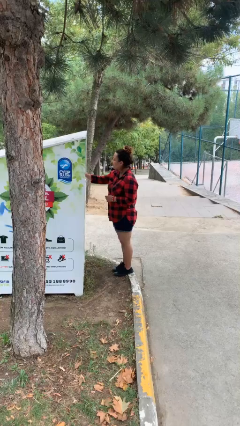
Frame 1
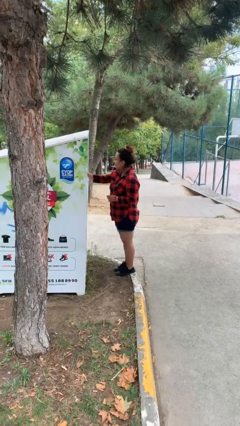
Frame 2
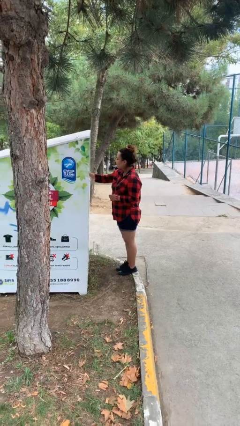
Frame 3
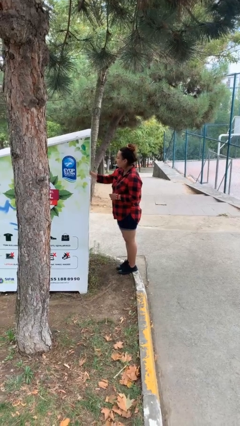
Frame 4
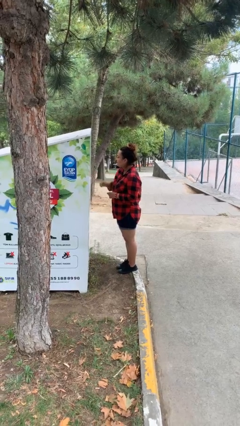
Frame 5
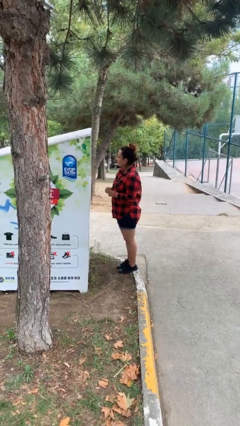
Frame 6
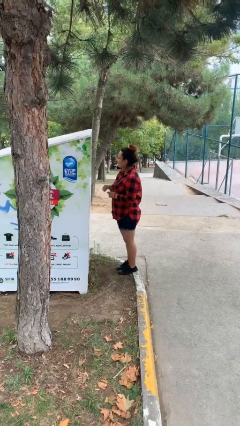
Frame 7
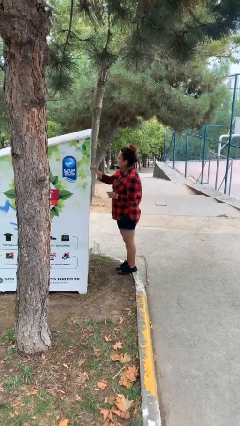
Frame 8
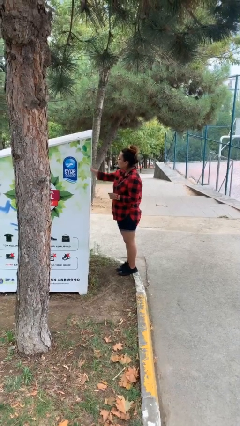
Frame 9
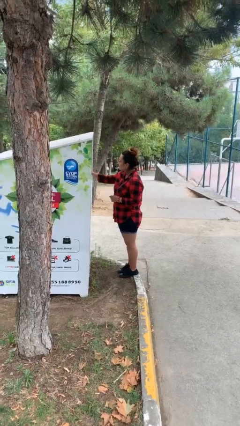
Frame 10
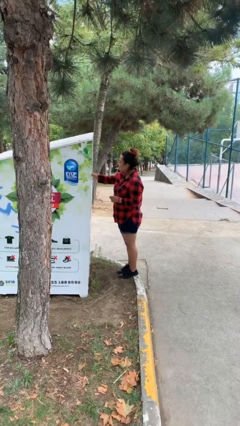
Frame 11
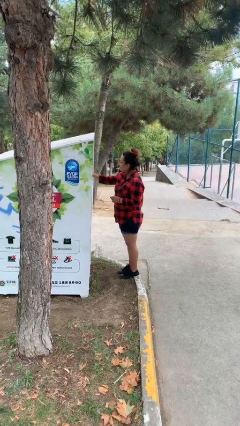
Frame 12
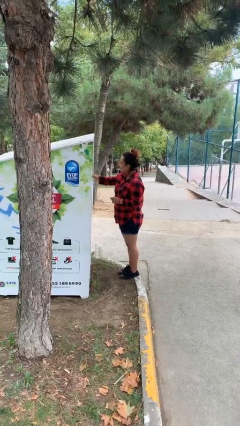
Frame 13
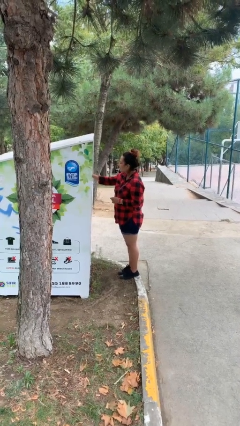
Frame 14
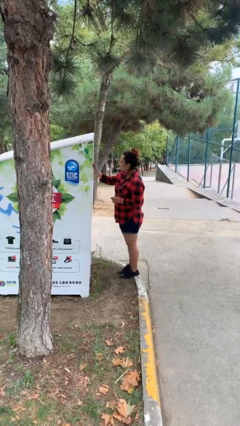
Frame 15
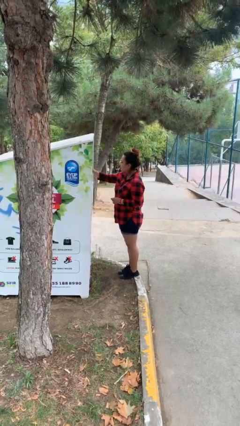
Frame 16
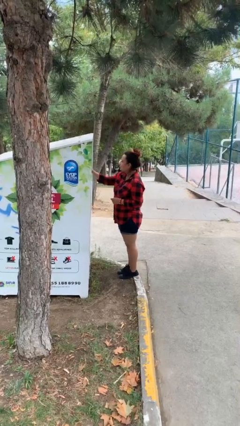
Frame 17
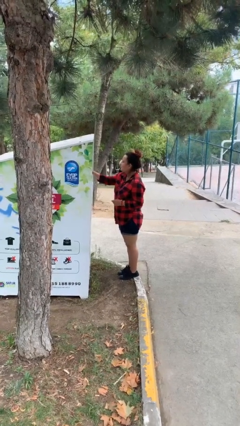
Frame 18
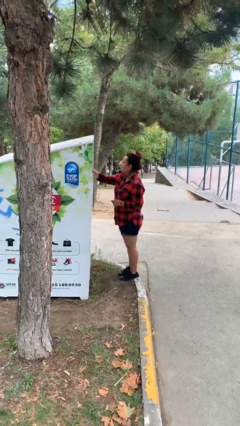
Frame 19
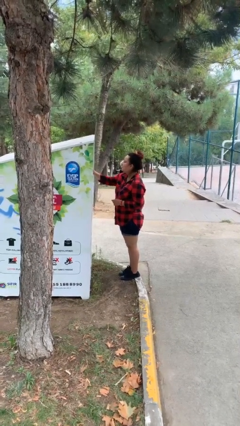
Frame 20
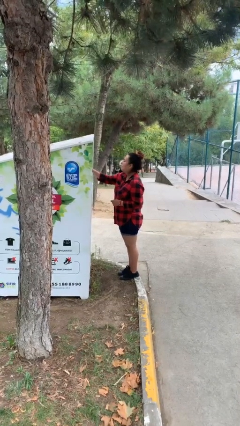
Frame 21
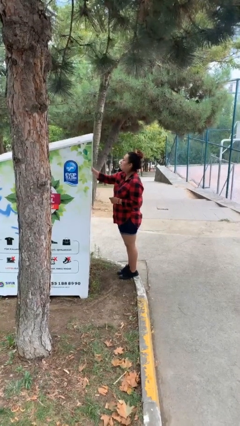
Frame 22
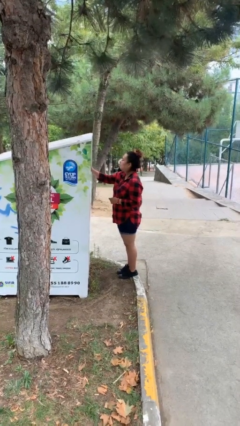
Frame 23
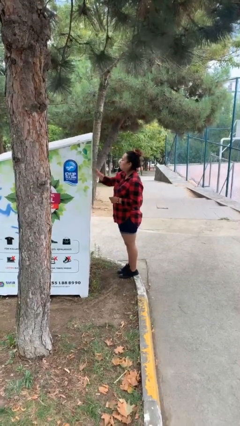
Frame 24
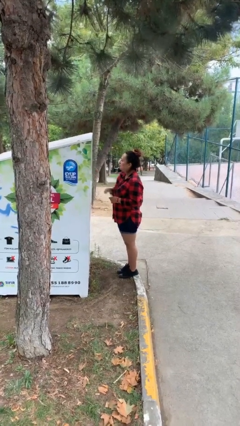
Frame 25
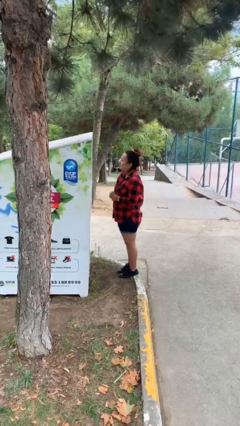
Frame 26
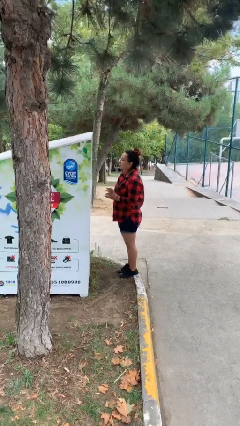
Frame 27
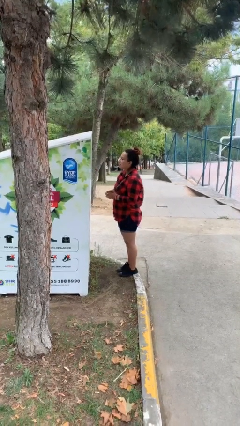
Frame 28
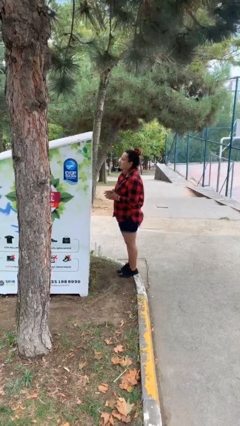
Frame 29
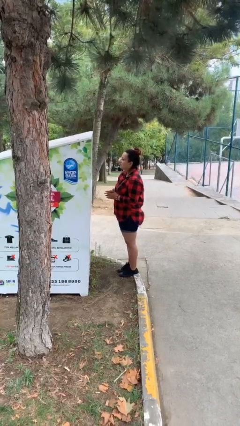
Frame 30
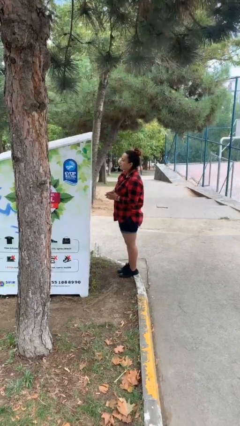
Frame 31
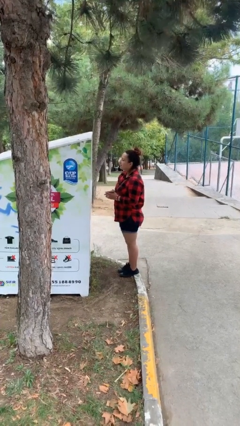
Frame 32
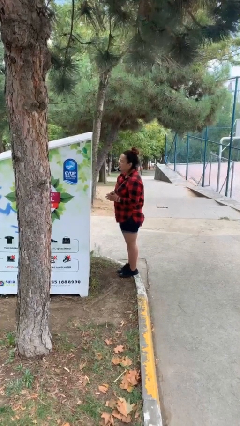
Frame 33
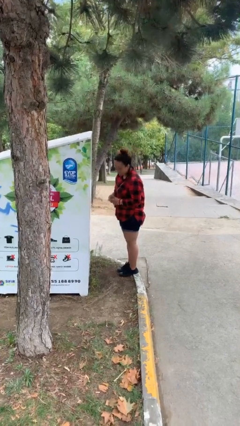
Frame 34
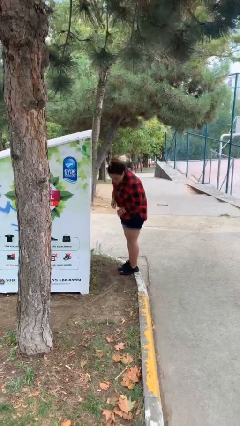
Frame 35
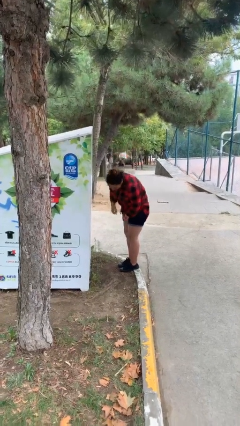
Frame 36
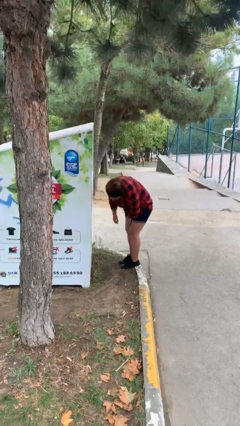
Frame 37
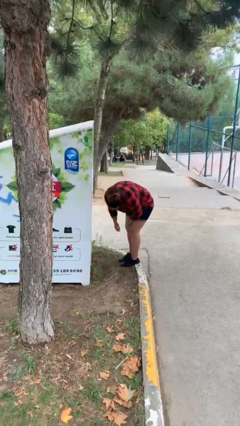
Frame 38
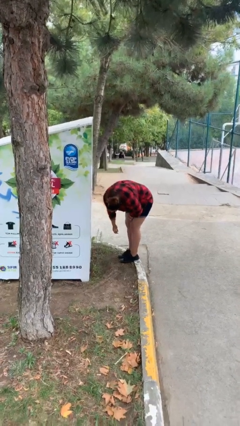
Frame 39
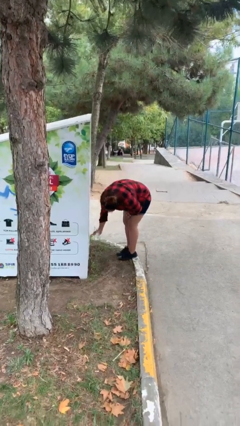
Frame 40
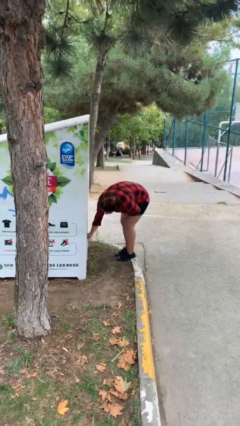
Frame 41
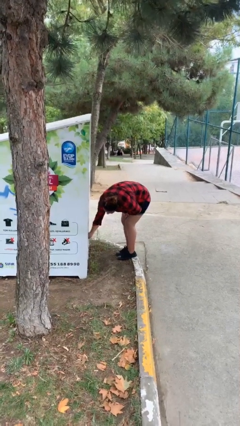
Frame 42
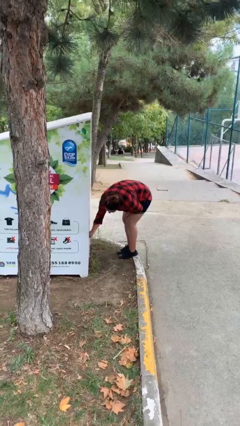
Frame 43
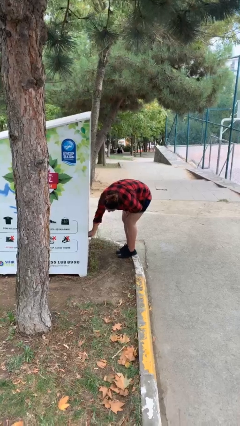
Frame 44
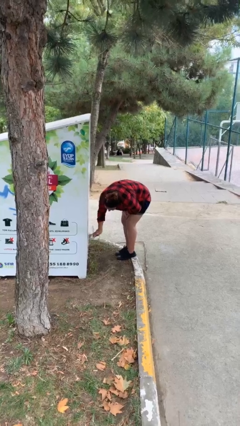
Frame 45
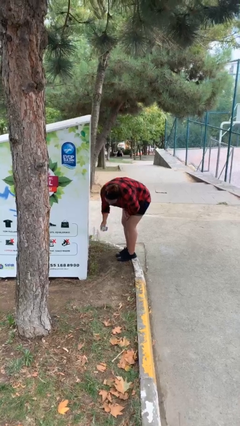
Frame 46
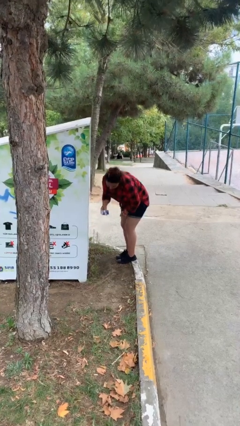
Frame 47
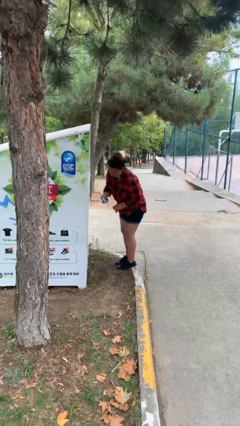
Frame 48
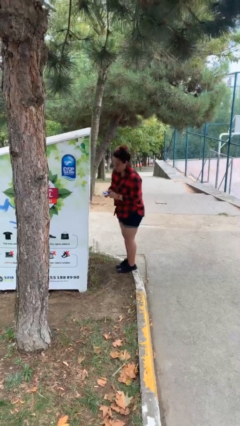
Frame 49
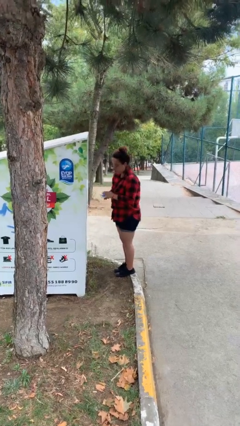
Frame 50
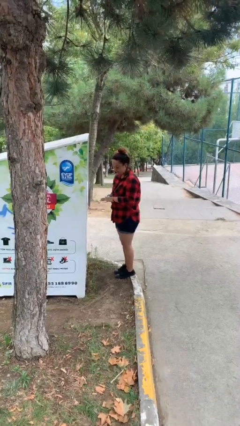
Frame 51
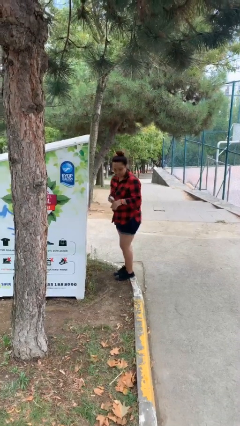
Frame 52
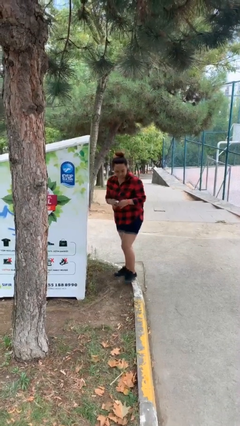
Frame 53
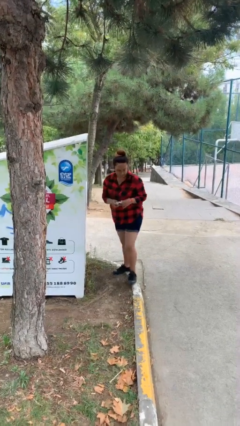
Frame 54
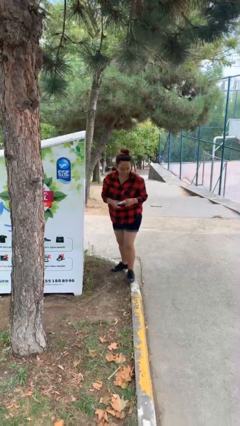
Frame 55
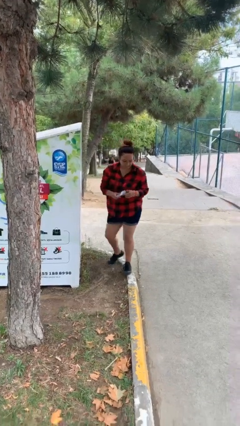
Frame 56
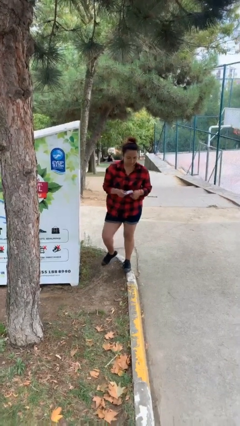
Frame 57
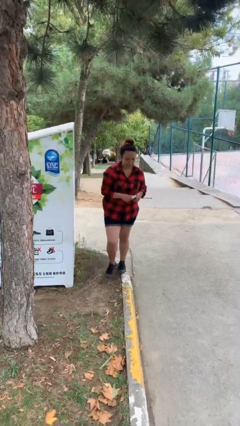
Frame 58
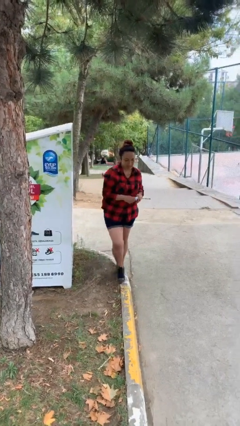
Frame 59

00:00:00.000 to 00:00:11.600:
person purchases from machine

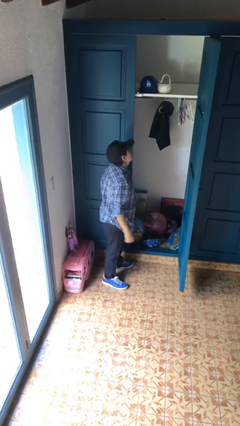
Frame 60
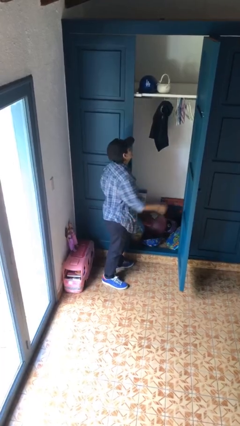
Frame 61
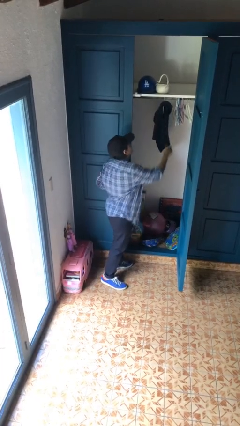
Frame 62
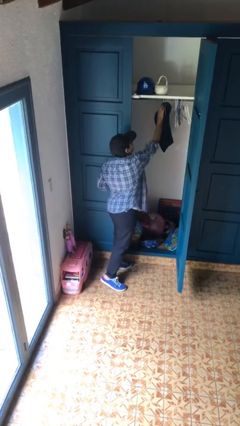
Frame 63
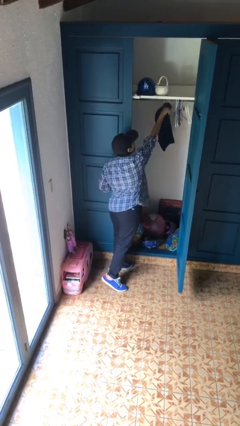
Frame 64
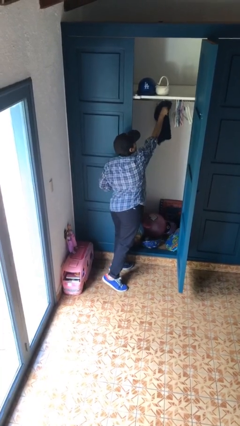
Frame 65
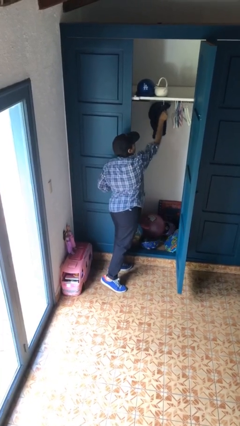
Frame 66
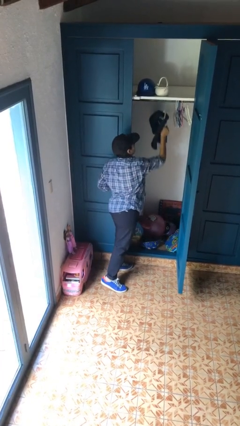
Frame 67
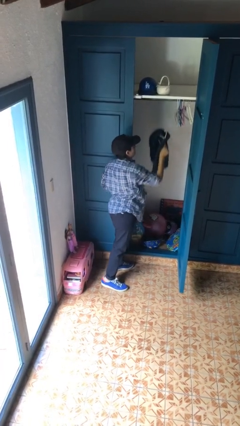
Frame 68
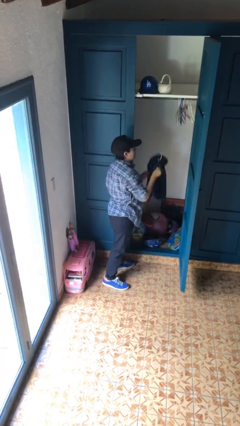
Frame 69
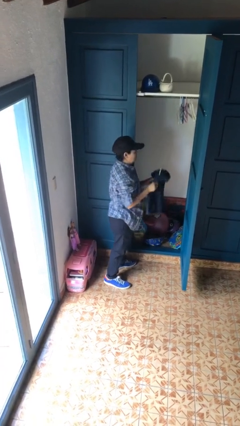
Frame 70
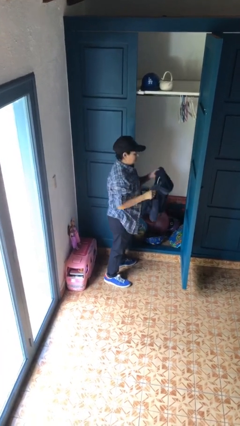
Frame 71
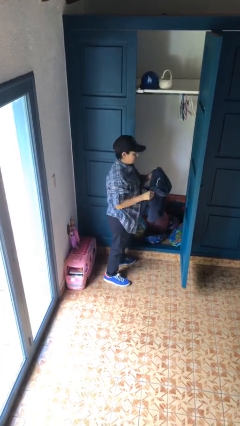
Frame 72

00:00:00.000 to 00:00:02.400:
person takes clothes from closet

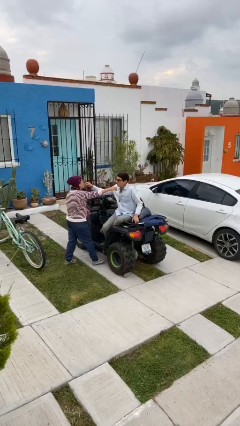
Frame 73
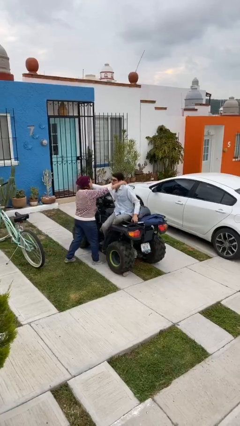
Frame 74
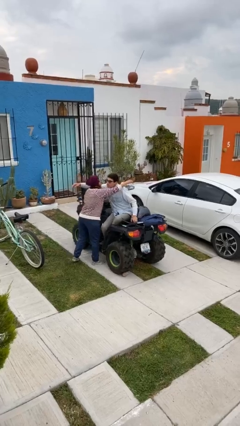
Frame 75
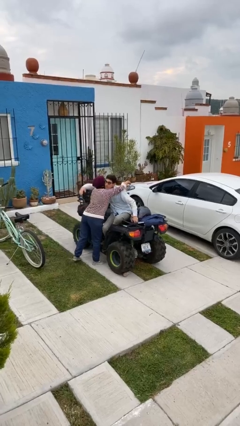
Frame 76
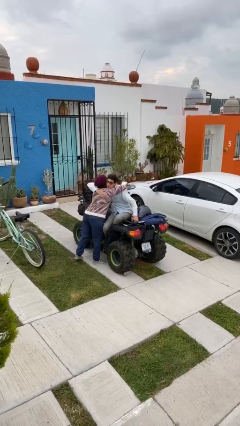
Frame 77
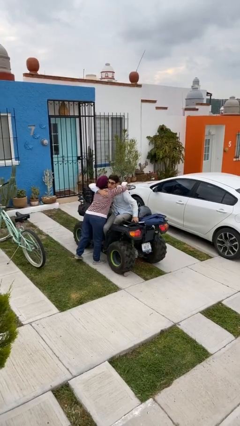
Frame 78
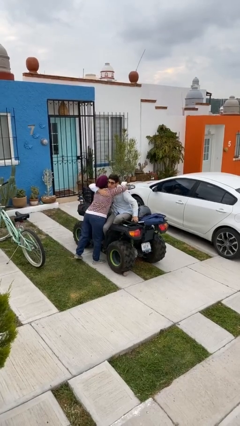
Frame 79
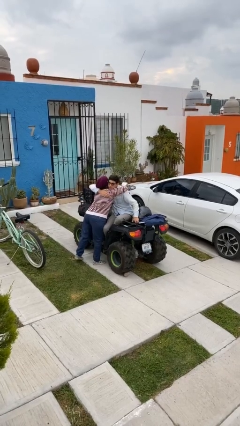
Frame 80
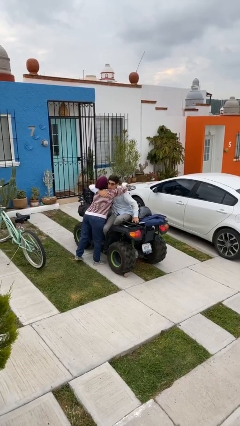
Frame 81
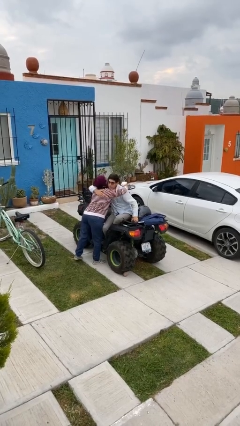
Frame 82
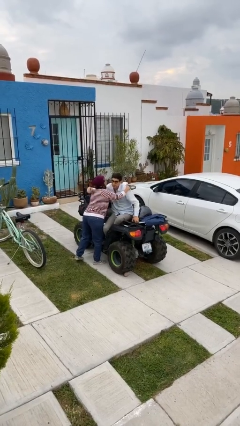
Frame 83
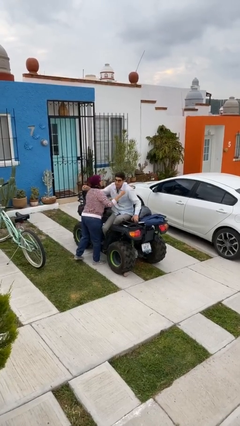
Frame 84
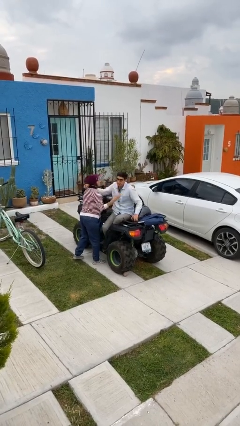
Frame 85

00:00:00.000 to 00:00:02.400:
person embraces person

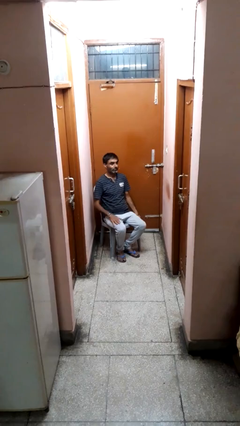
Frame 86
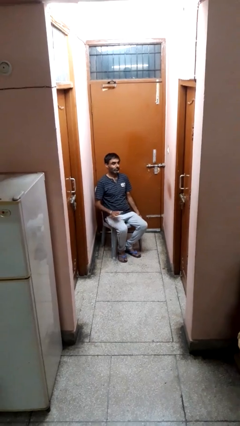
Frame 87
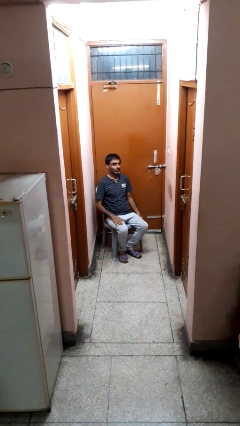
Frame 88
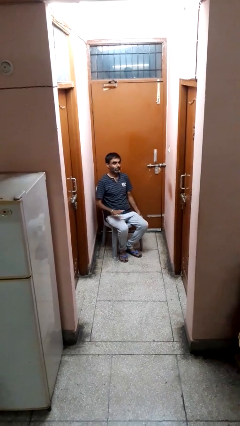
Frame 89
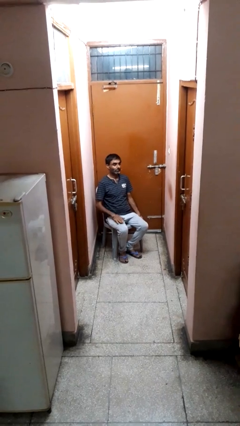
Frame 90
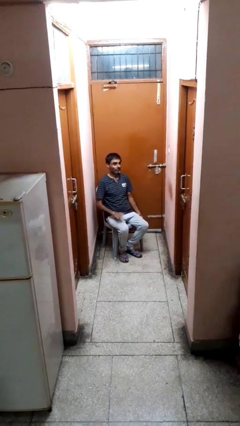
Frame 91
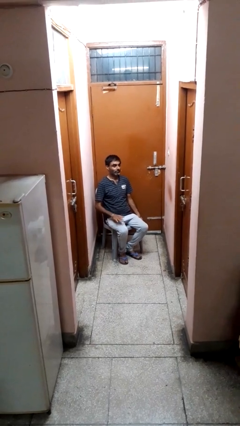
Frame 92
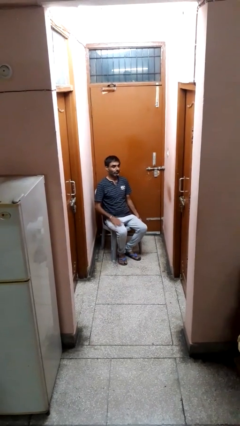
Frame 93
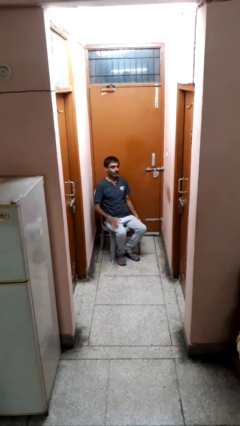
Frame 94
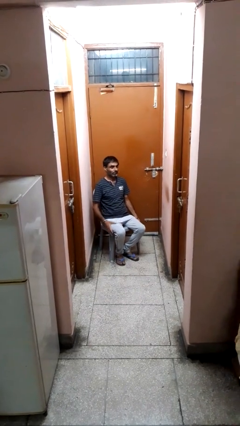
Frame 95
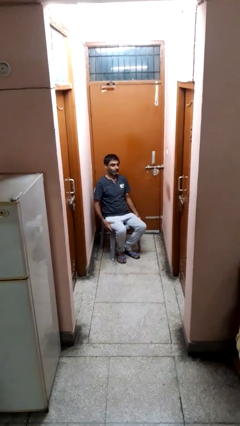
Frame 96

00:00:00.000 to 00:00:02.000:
person slaps hands on thighs
